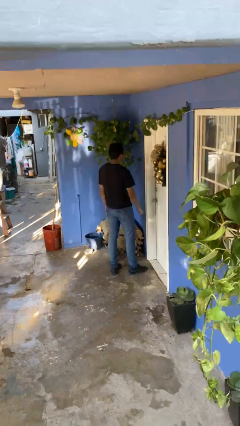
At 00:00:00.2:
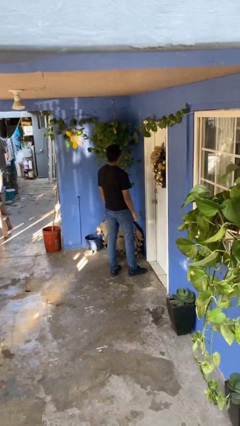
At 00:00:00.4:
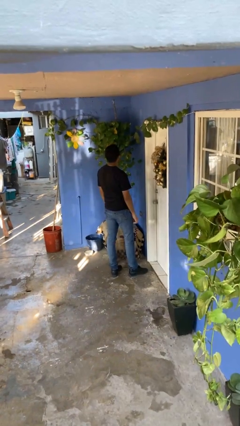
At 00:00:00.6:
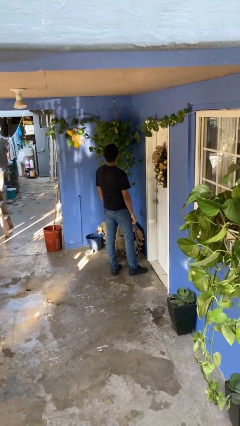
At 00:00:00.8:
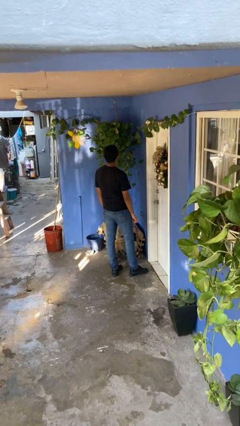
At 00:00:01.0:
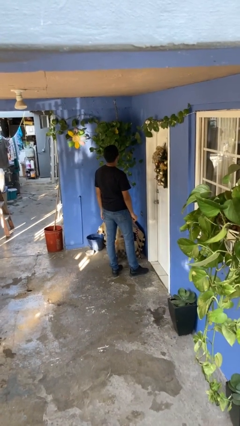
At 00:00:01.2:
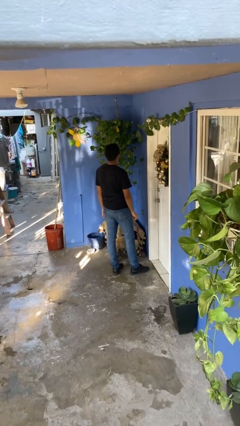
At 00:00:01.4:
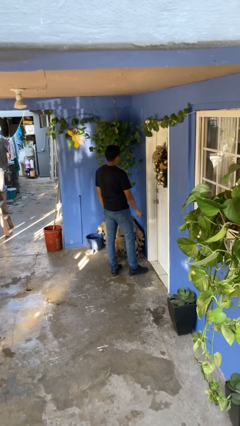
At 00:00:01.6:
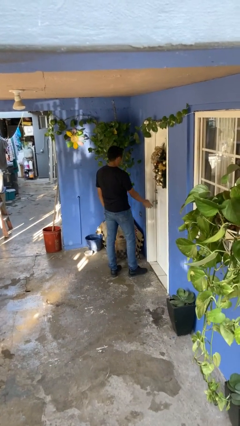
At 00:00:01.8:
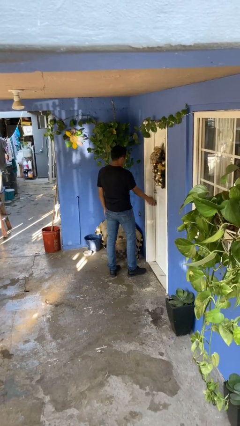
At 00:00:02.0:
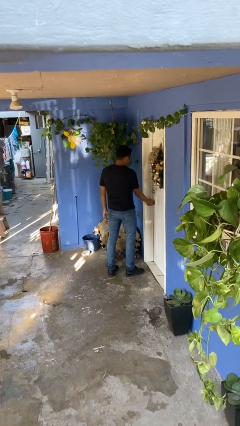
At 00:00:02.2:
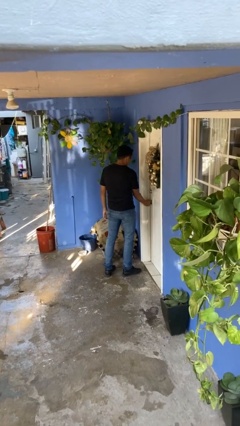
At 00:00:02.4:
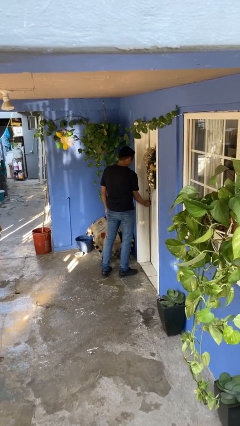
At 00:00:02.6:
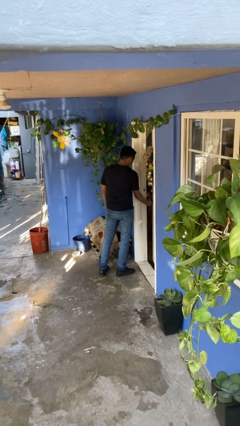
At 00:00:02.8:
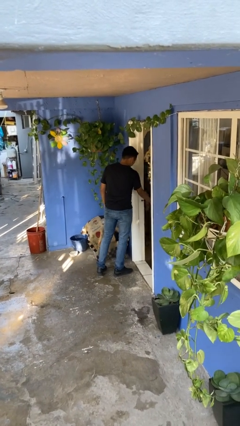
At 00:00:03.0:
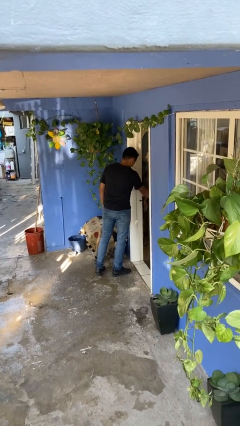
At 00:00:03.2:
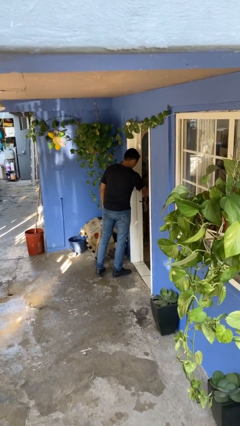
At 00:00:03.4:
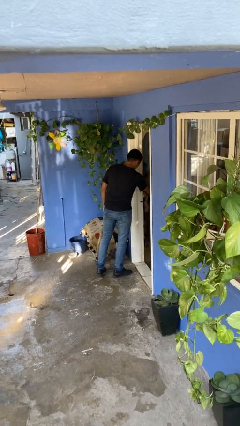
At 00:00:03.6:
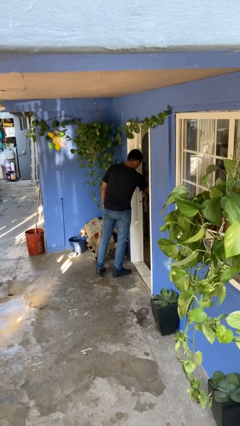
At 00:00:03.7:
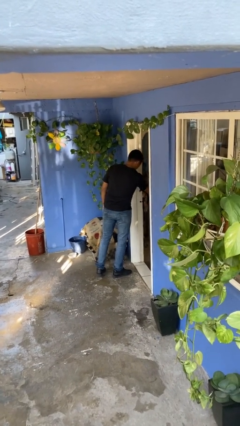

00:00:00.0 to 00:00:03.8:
person opens facility door

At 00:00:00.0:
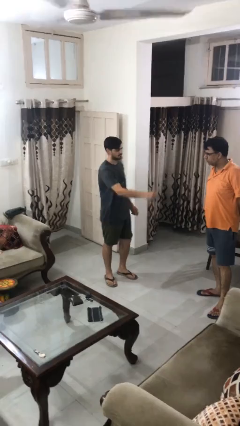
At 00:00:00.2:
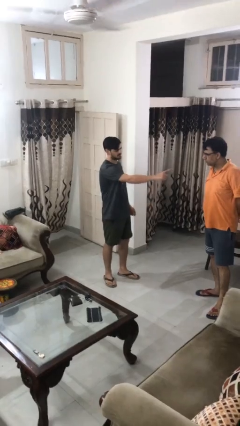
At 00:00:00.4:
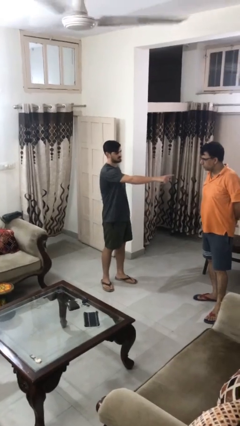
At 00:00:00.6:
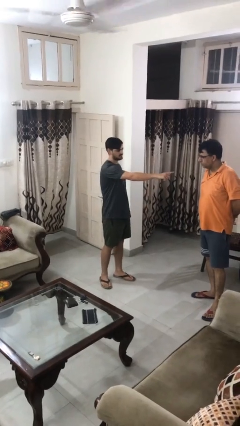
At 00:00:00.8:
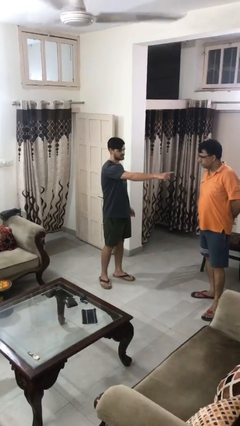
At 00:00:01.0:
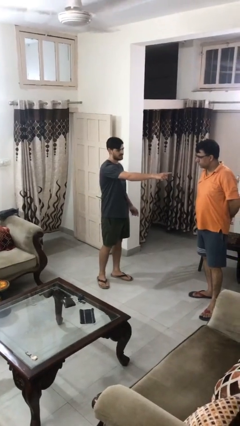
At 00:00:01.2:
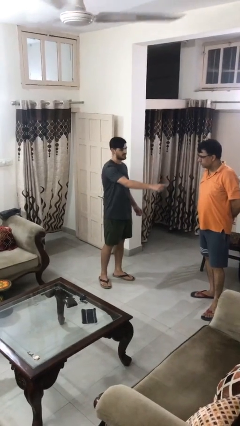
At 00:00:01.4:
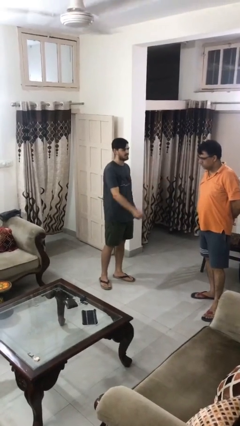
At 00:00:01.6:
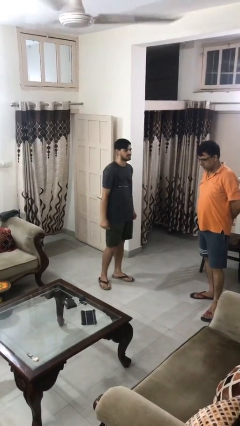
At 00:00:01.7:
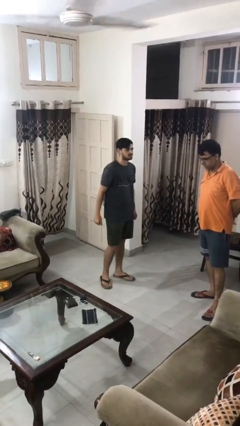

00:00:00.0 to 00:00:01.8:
person points at person

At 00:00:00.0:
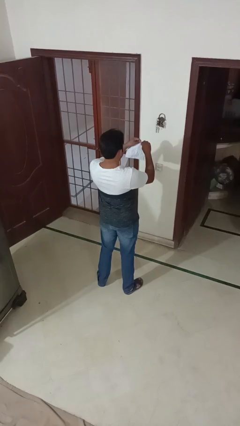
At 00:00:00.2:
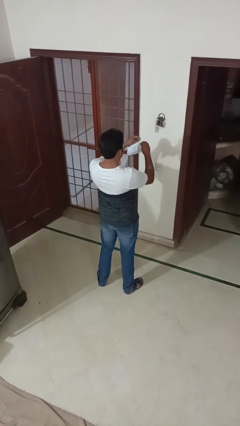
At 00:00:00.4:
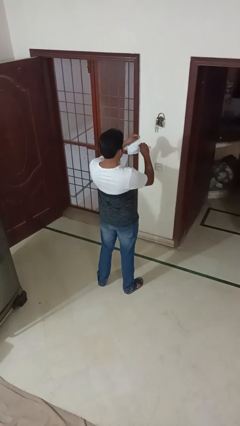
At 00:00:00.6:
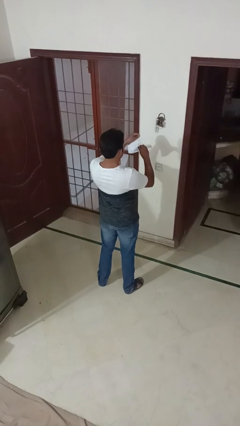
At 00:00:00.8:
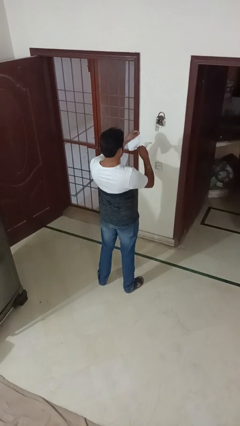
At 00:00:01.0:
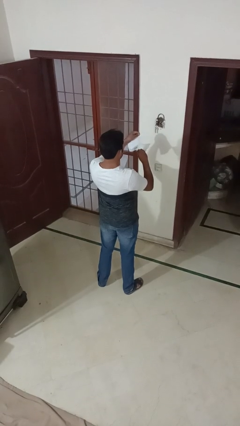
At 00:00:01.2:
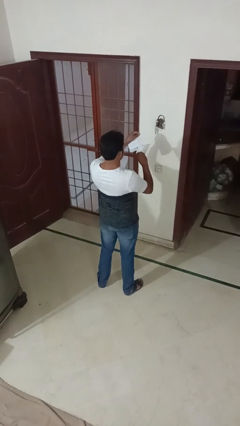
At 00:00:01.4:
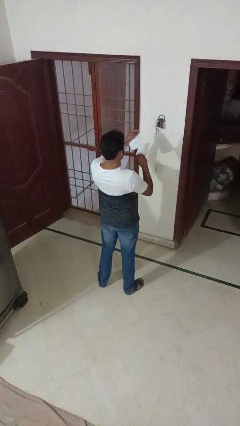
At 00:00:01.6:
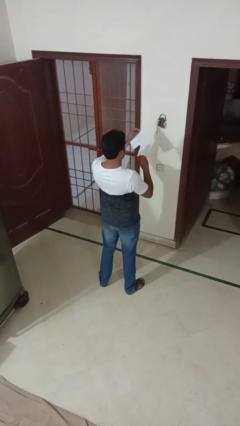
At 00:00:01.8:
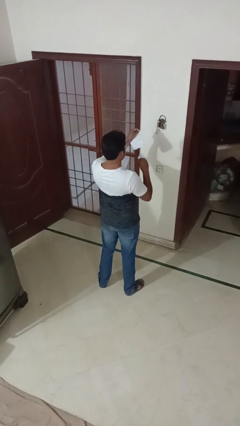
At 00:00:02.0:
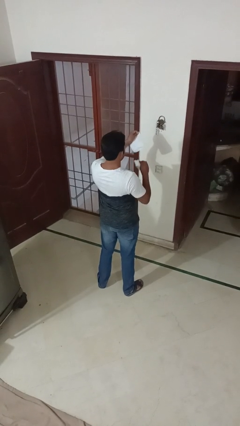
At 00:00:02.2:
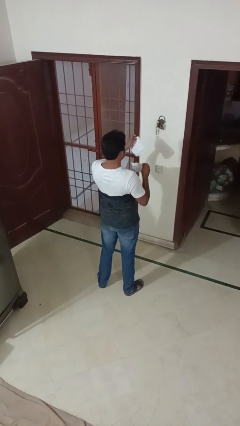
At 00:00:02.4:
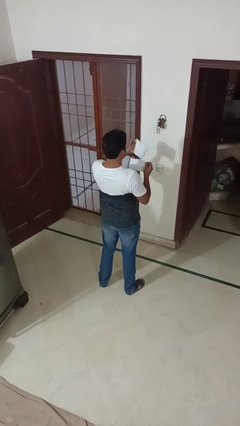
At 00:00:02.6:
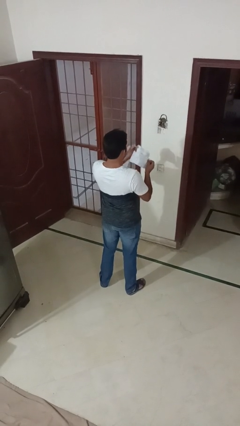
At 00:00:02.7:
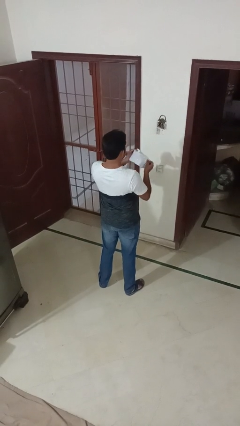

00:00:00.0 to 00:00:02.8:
person tears paper

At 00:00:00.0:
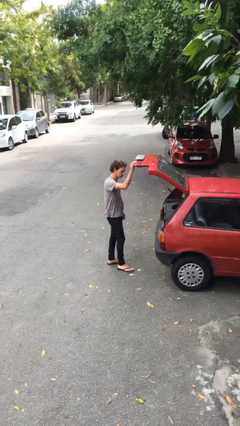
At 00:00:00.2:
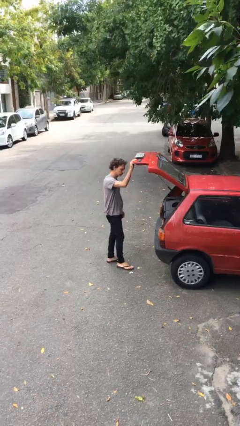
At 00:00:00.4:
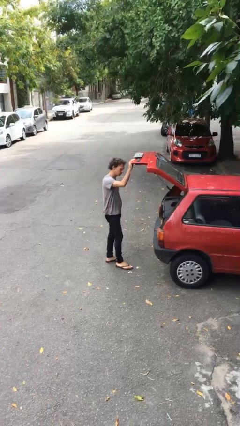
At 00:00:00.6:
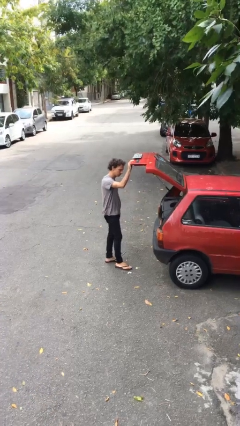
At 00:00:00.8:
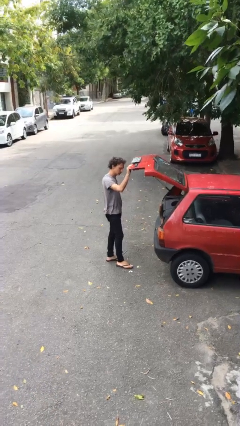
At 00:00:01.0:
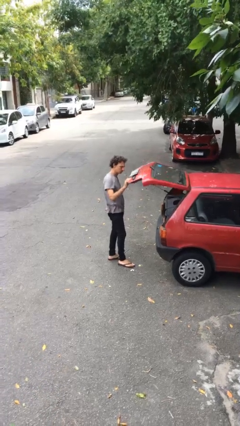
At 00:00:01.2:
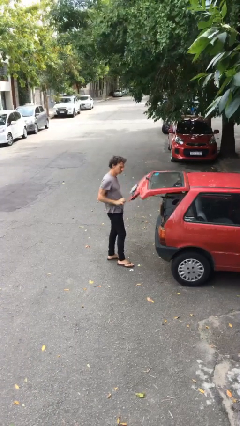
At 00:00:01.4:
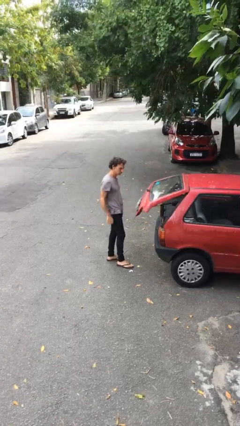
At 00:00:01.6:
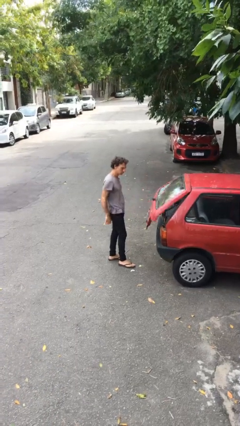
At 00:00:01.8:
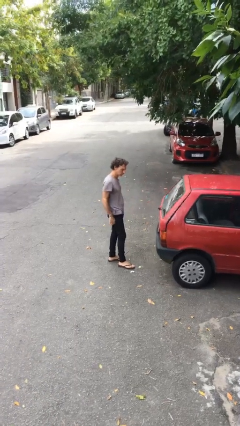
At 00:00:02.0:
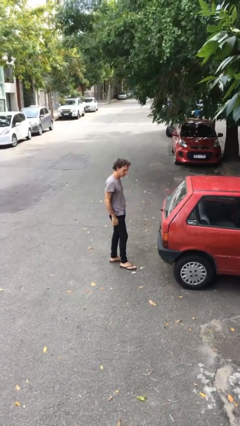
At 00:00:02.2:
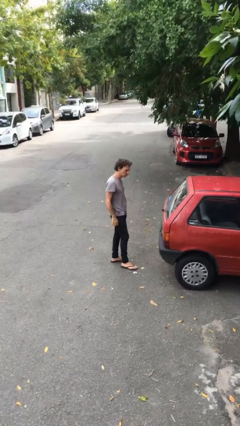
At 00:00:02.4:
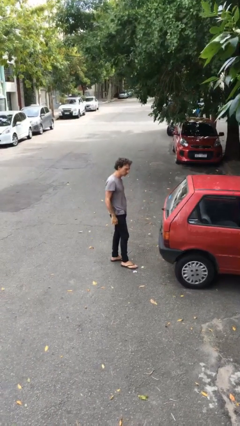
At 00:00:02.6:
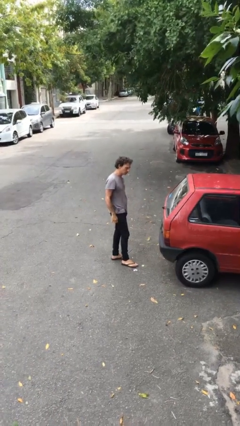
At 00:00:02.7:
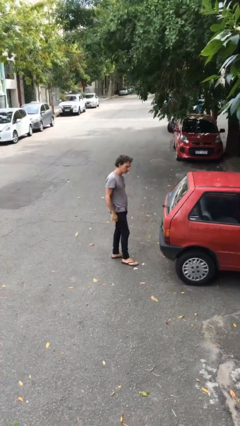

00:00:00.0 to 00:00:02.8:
person closes car trunk

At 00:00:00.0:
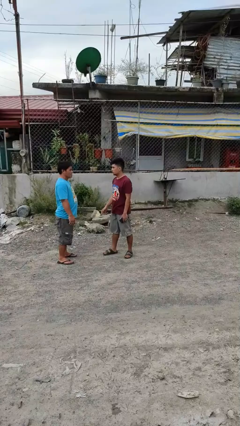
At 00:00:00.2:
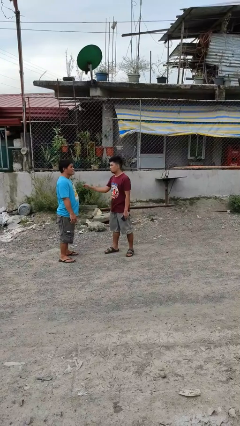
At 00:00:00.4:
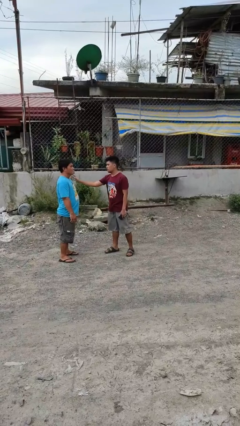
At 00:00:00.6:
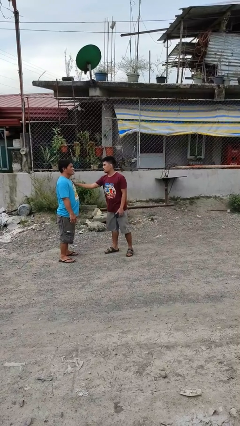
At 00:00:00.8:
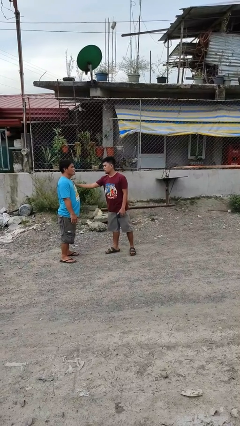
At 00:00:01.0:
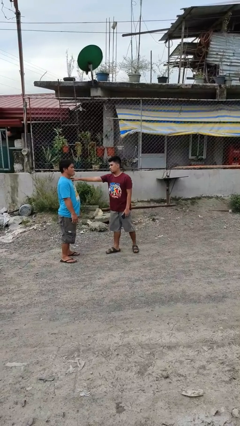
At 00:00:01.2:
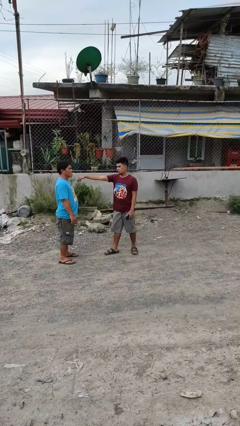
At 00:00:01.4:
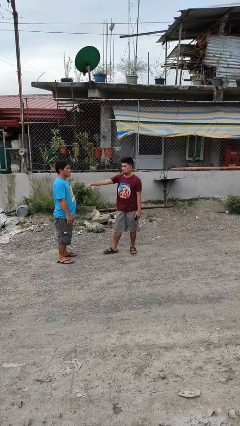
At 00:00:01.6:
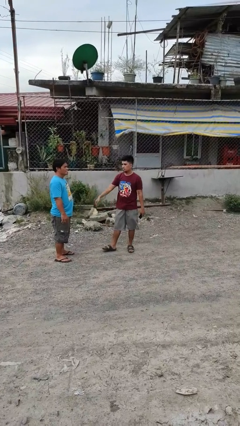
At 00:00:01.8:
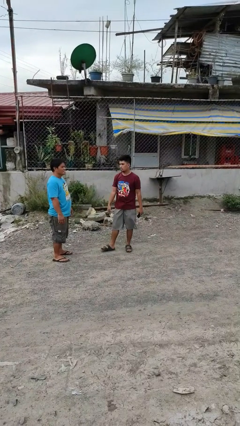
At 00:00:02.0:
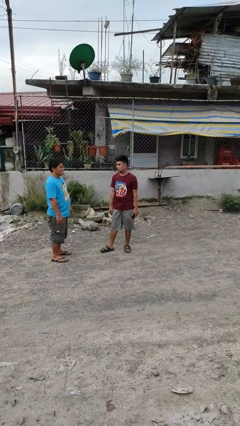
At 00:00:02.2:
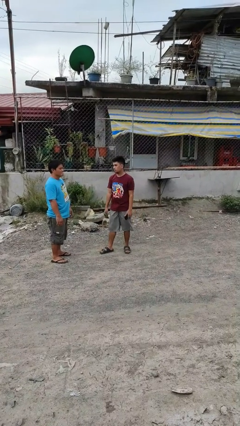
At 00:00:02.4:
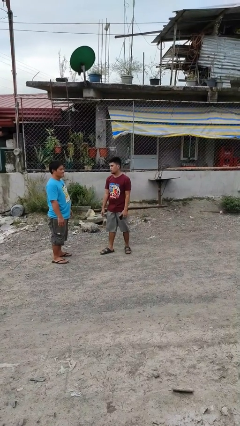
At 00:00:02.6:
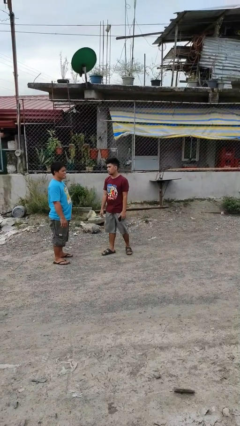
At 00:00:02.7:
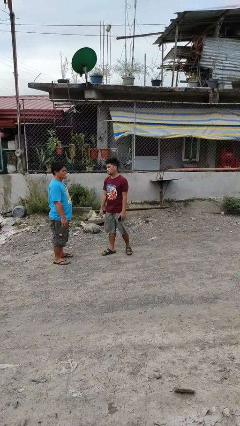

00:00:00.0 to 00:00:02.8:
person shoves person

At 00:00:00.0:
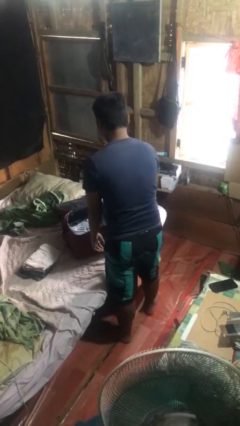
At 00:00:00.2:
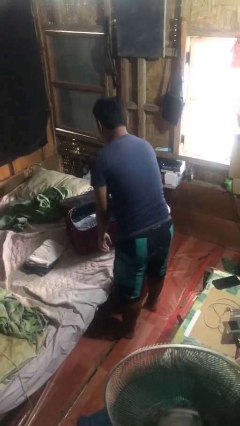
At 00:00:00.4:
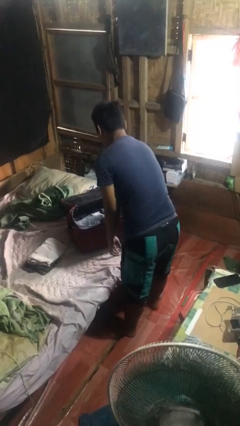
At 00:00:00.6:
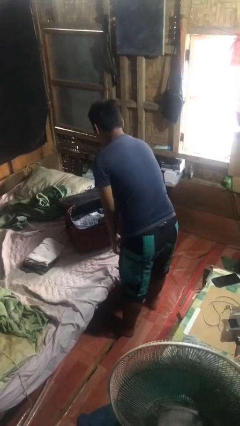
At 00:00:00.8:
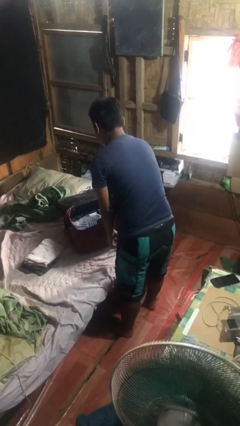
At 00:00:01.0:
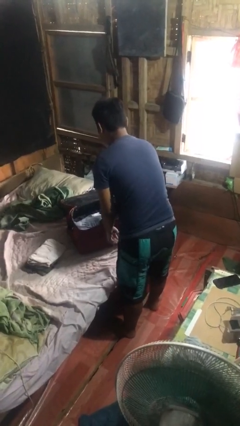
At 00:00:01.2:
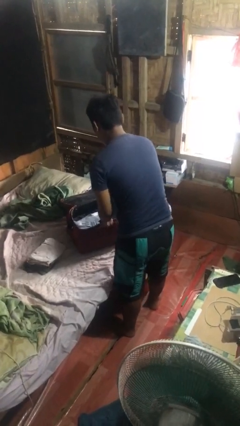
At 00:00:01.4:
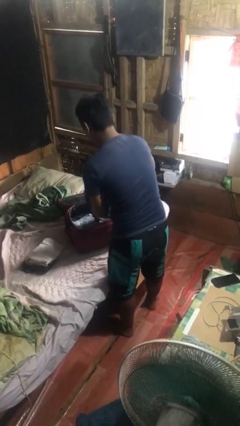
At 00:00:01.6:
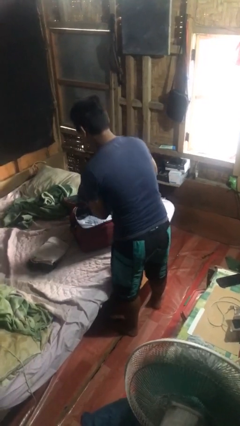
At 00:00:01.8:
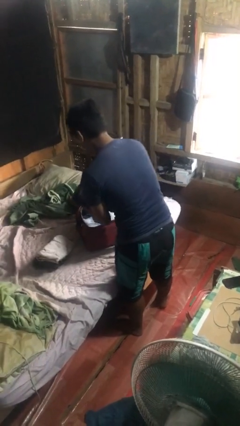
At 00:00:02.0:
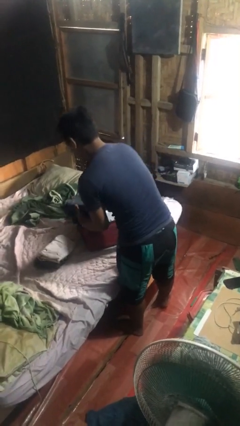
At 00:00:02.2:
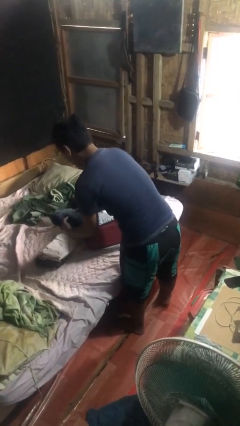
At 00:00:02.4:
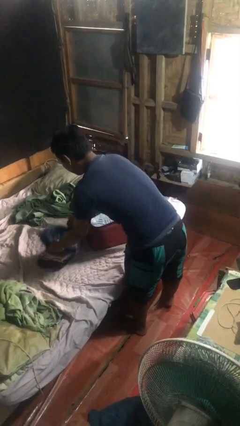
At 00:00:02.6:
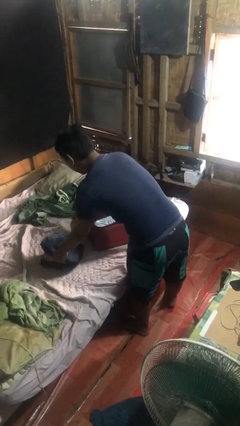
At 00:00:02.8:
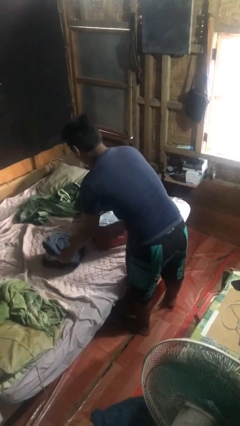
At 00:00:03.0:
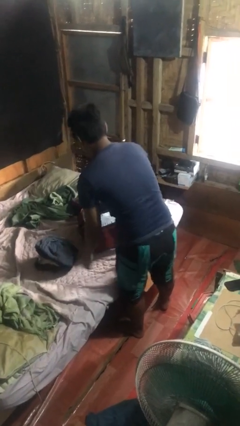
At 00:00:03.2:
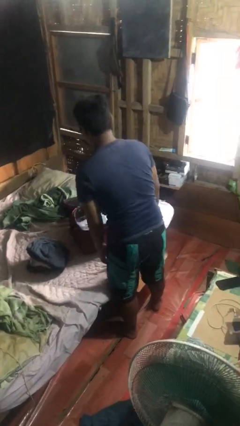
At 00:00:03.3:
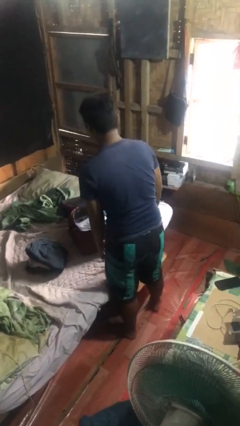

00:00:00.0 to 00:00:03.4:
person unloads clothes from suitcase
